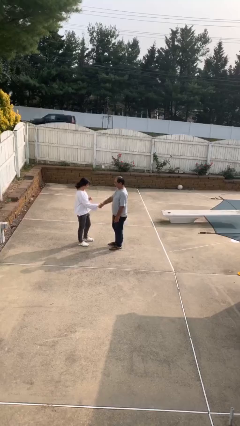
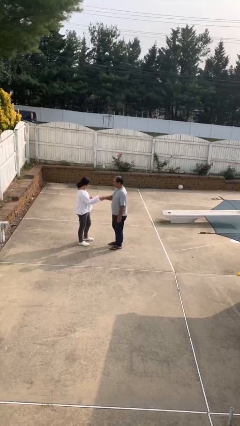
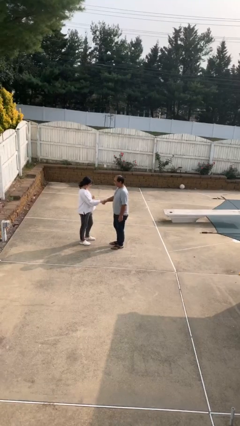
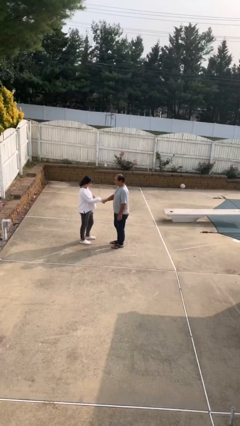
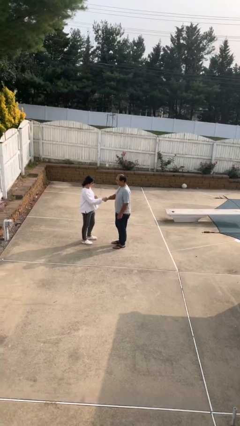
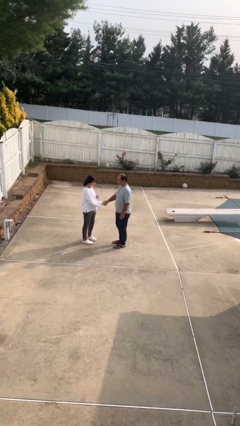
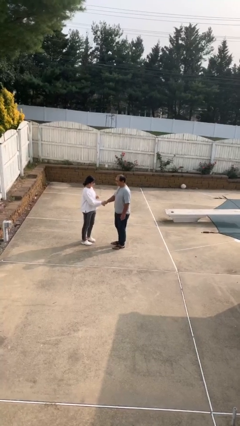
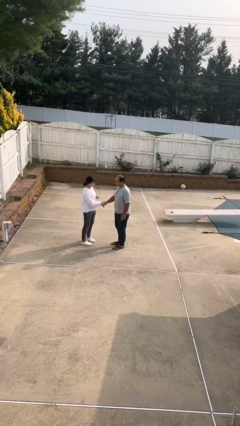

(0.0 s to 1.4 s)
person shakes hand

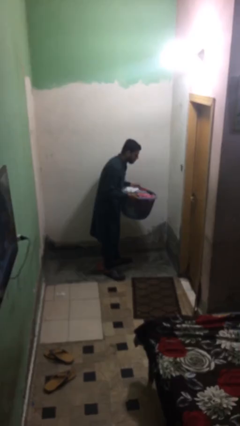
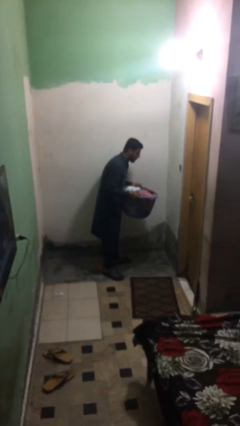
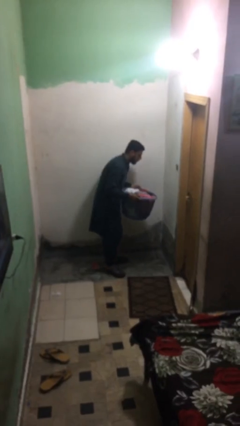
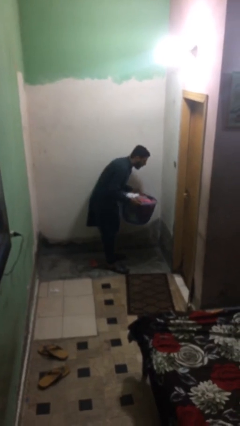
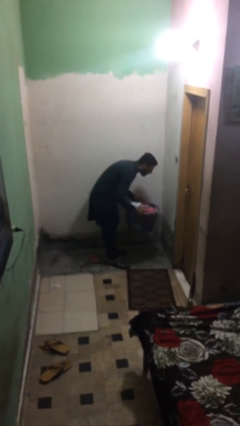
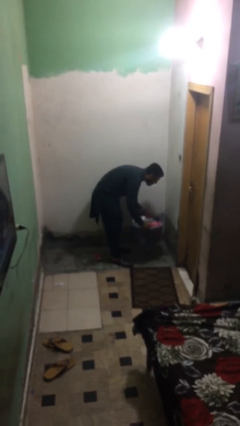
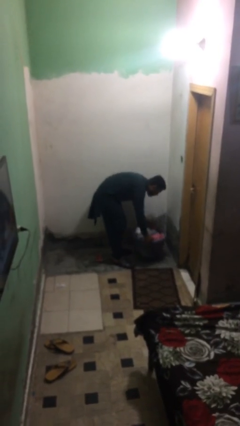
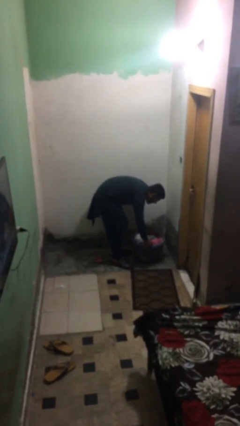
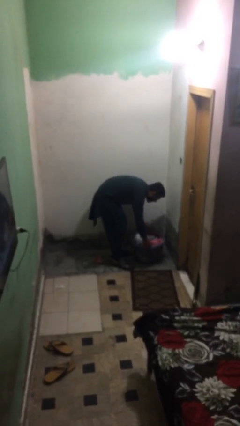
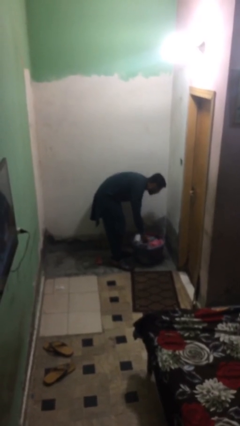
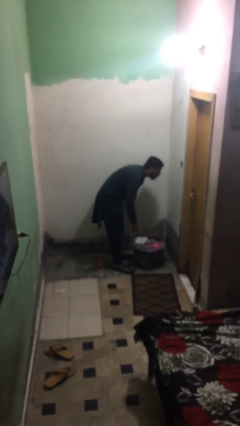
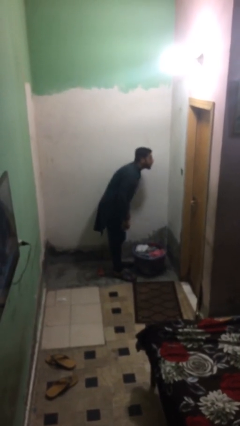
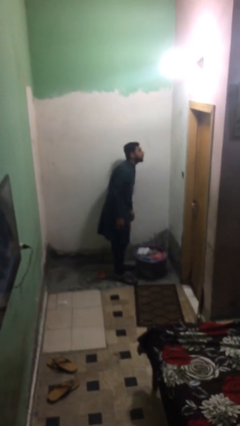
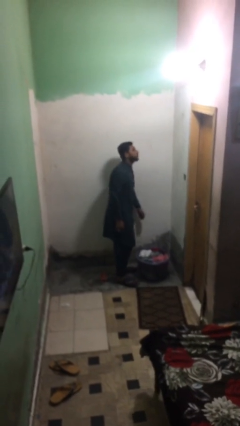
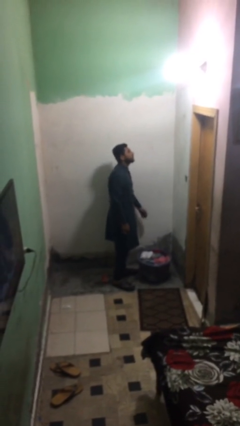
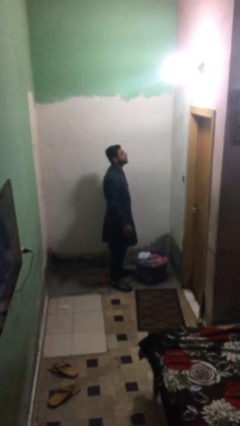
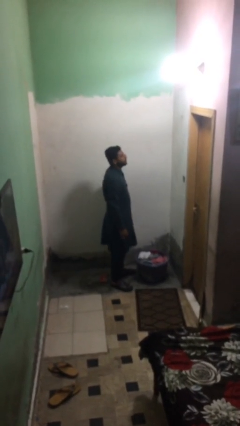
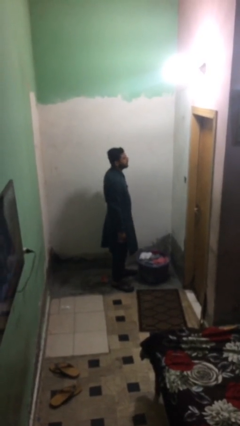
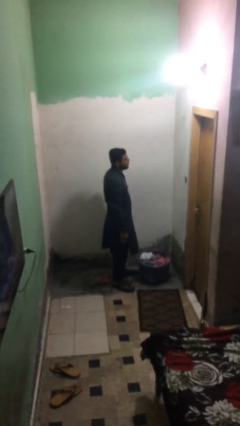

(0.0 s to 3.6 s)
person puts down object on floor

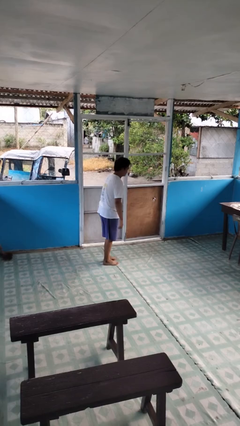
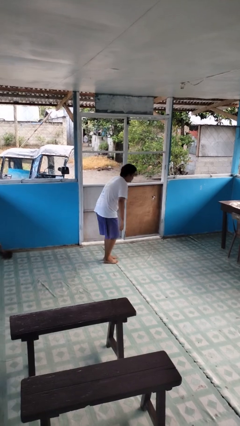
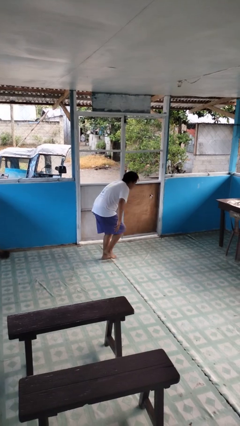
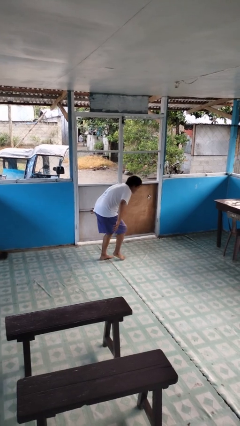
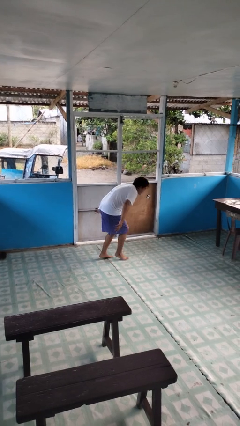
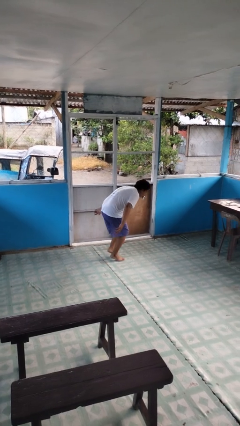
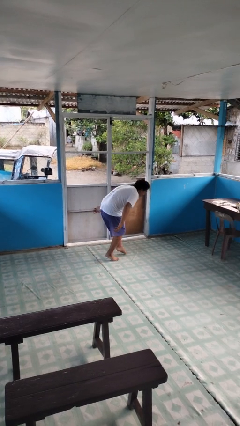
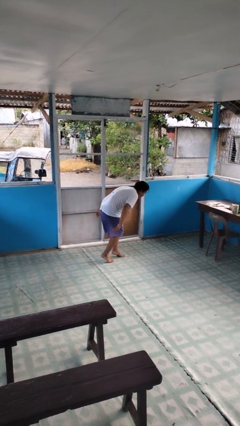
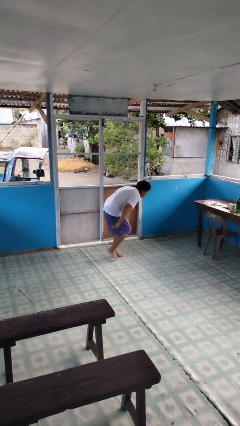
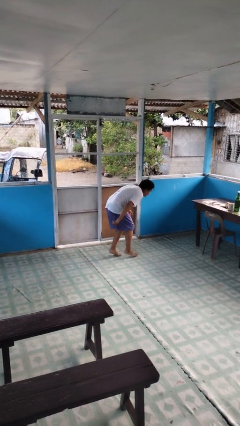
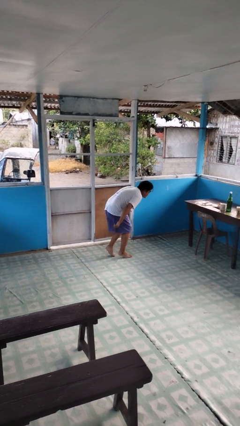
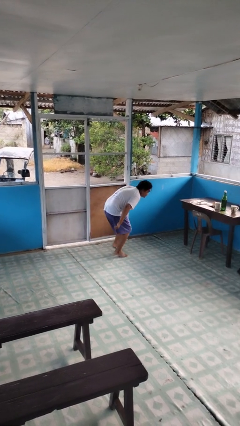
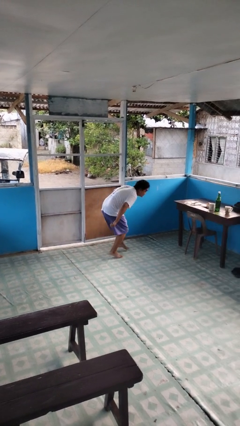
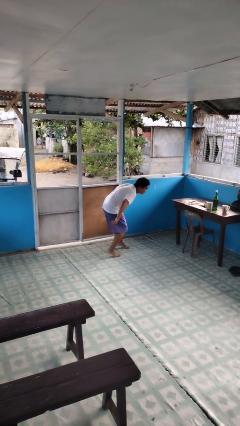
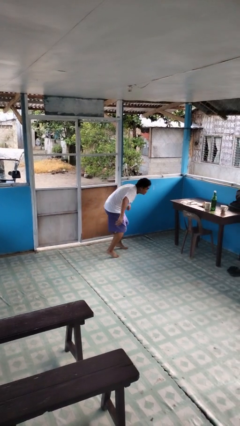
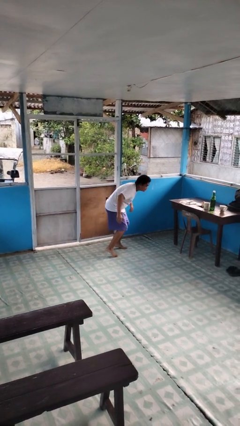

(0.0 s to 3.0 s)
person walks tiptoe

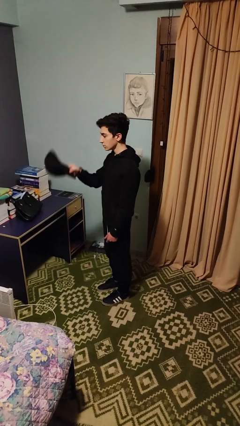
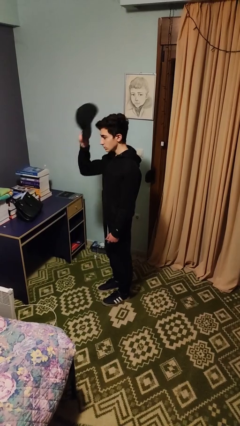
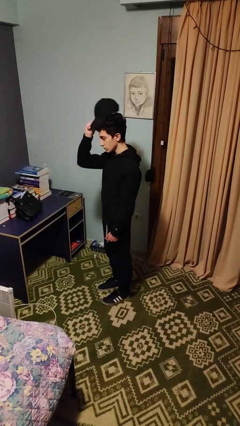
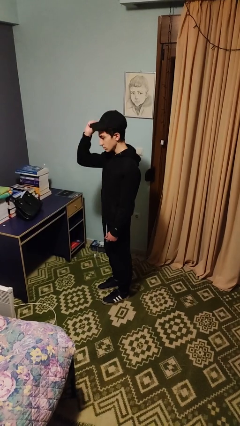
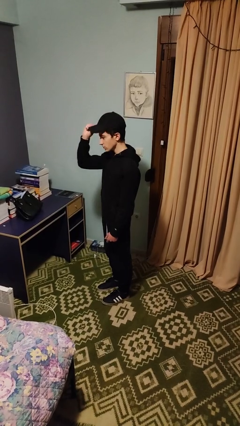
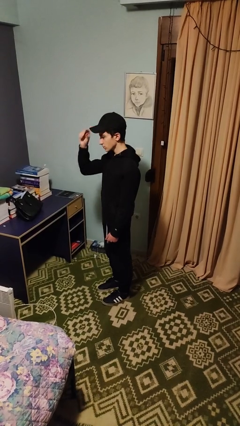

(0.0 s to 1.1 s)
person puts on hat

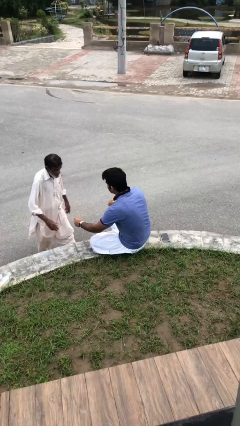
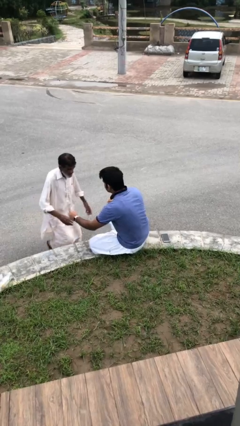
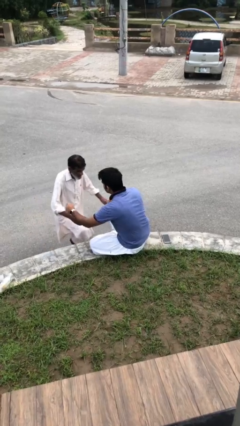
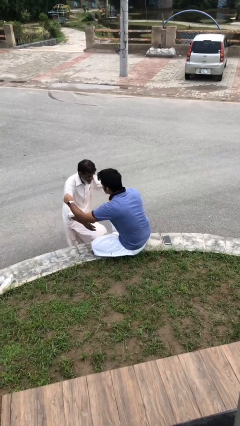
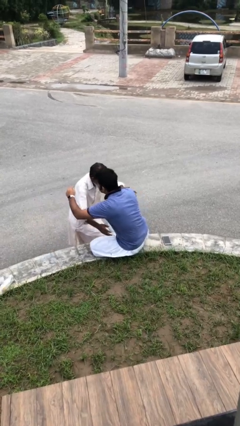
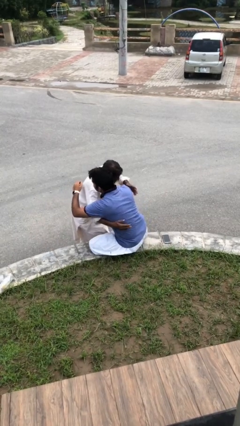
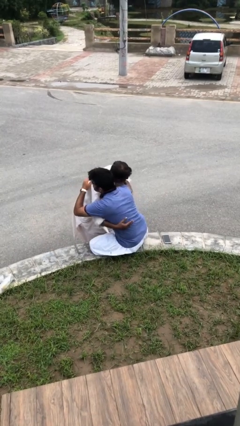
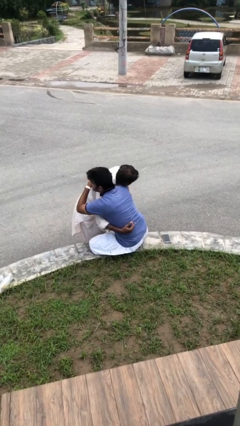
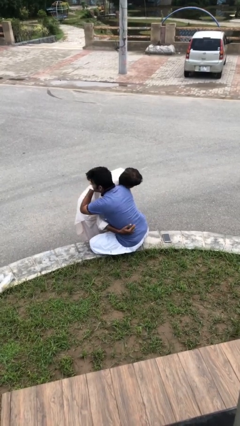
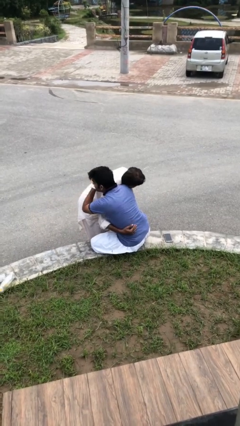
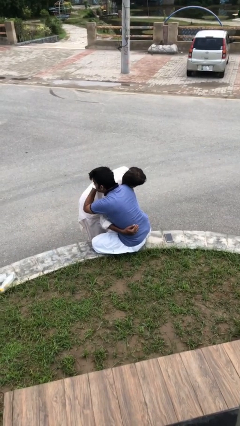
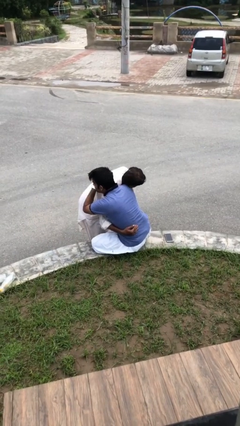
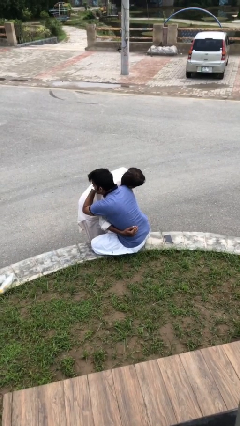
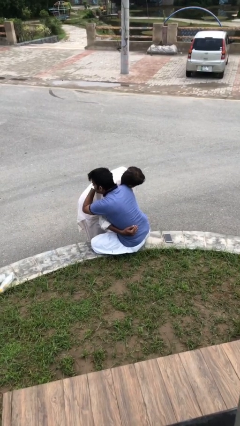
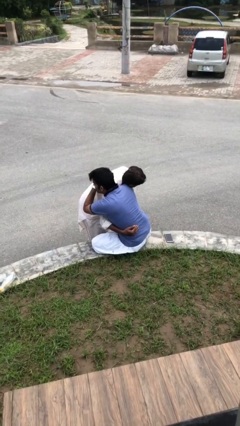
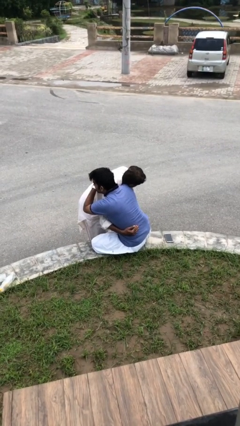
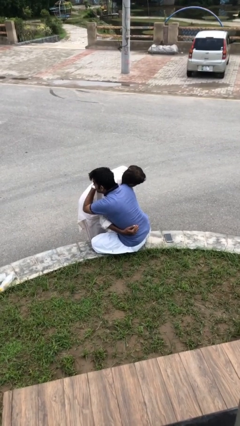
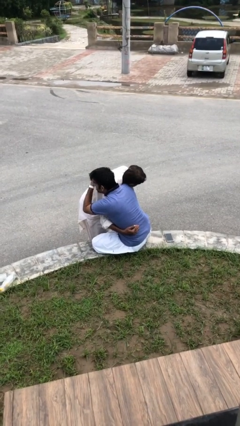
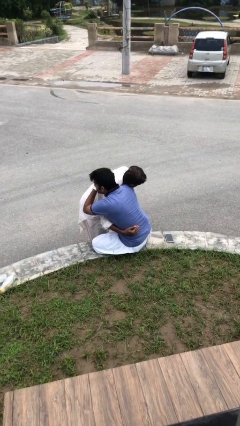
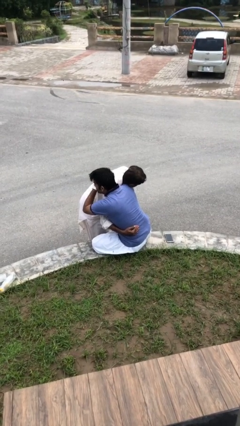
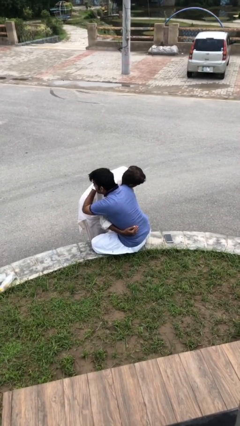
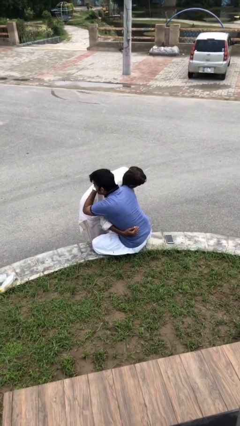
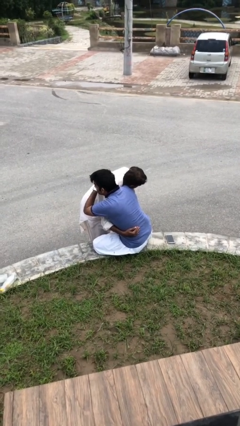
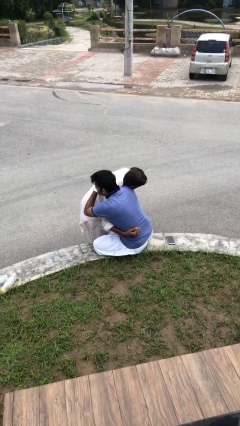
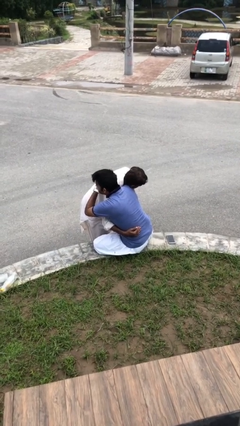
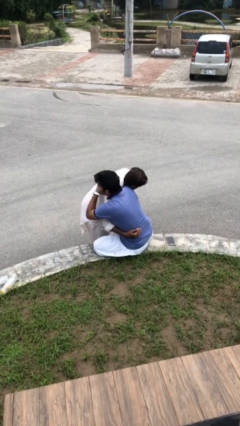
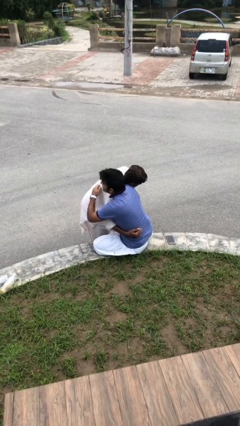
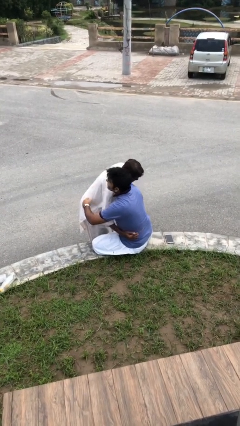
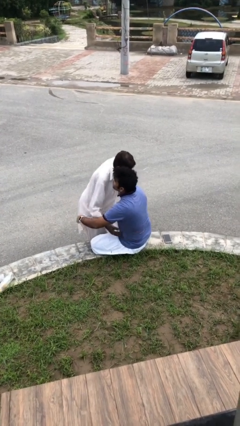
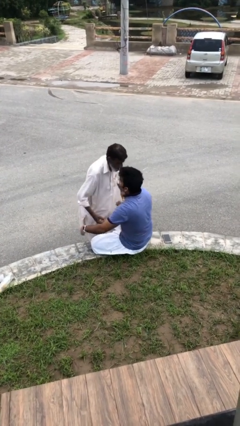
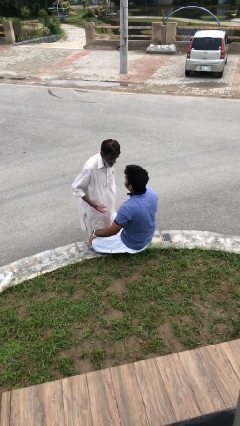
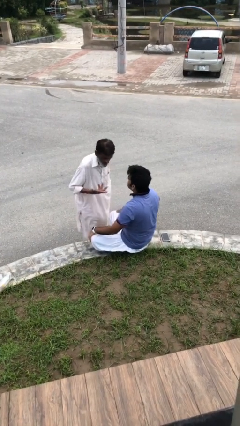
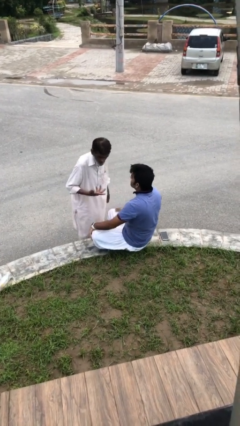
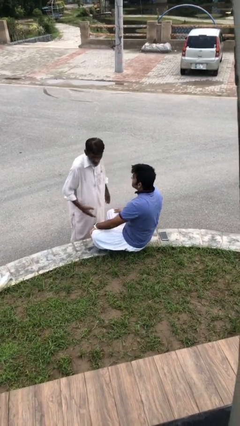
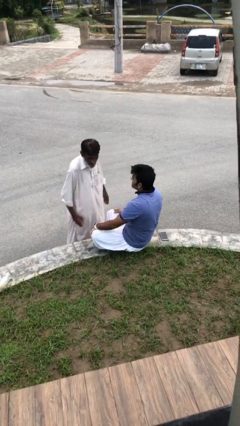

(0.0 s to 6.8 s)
person embraces person

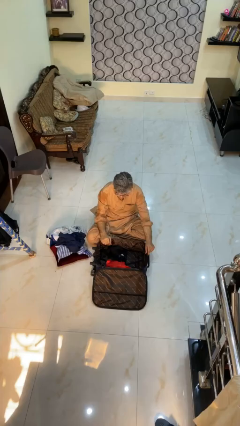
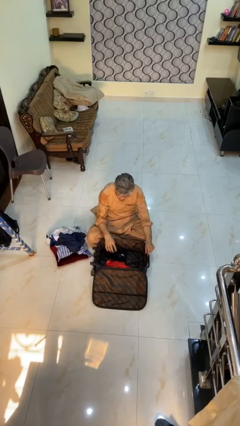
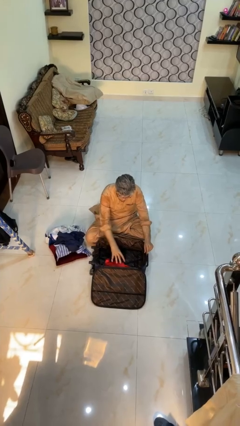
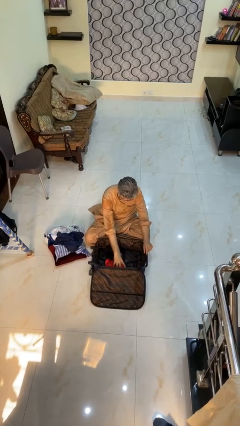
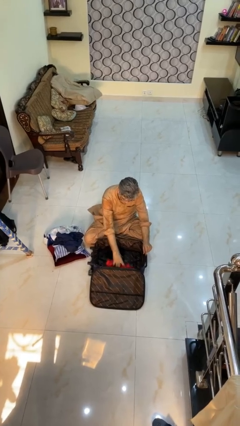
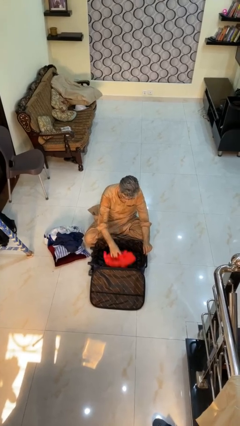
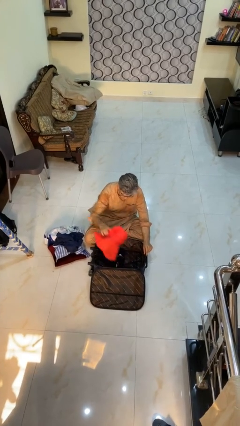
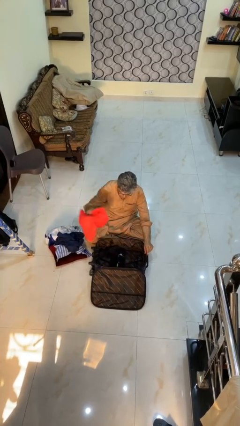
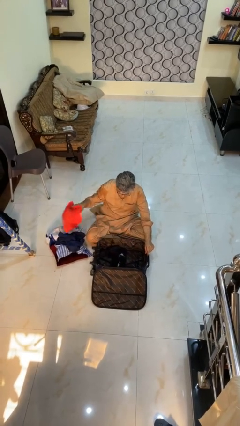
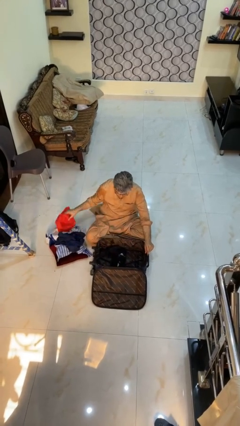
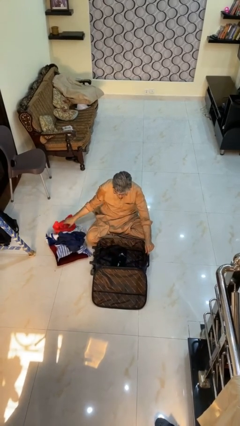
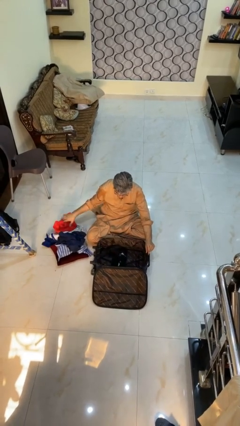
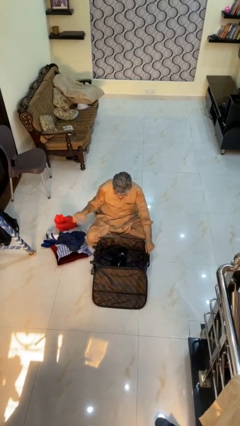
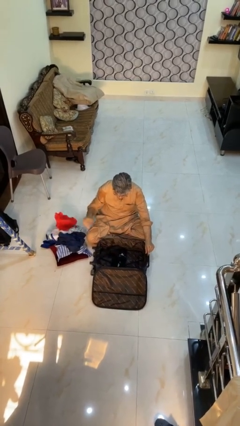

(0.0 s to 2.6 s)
person unloads clothes from suitcase
